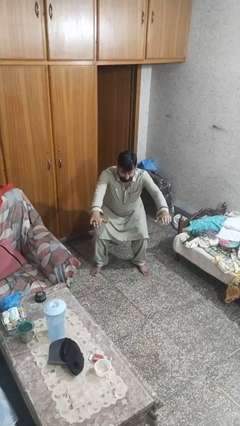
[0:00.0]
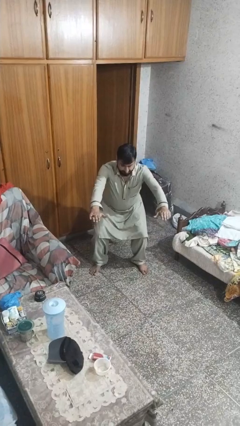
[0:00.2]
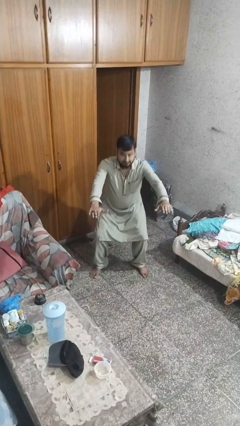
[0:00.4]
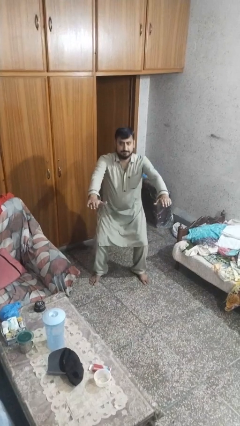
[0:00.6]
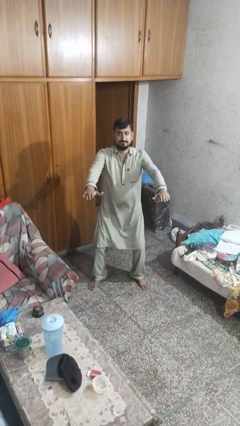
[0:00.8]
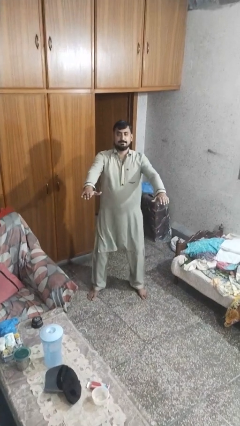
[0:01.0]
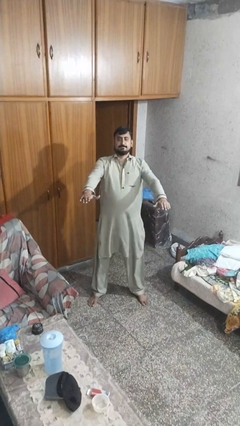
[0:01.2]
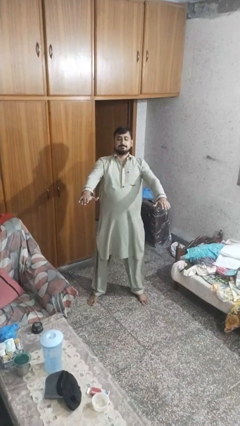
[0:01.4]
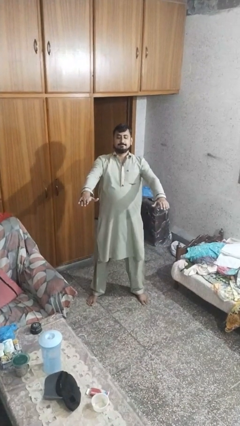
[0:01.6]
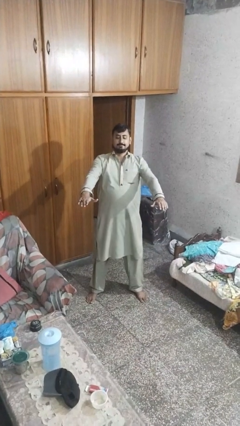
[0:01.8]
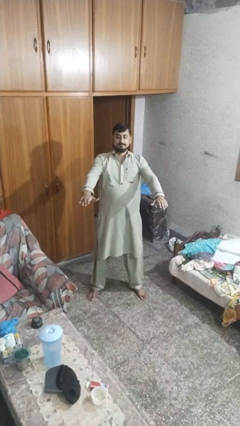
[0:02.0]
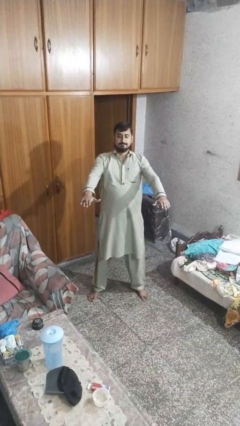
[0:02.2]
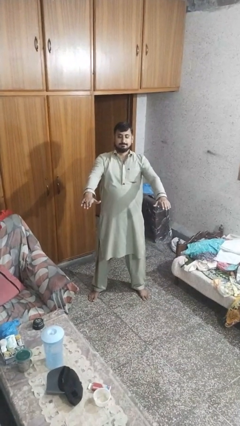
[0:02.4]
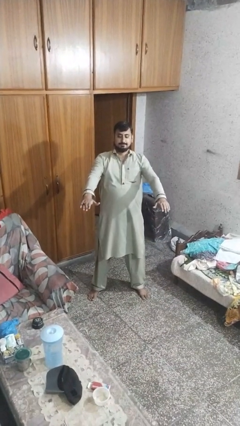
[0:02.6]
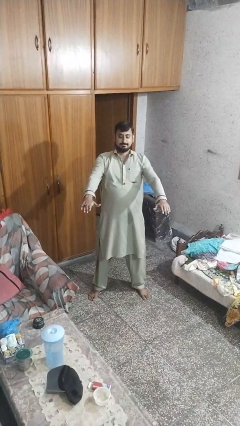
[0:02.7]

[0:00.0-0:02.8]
person stands up

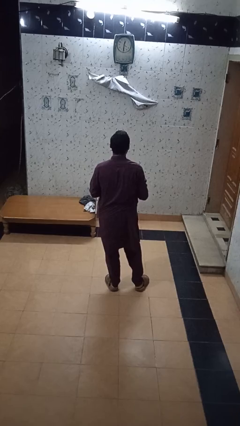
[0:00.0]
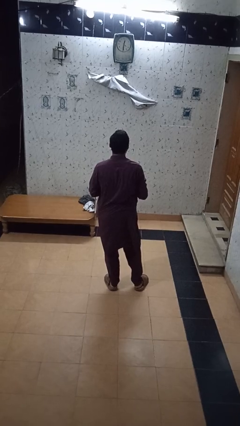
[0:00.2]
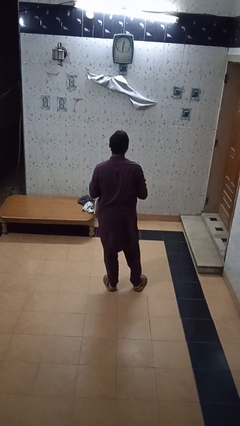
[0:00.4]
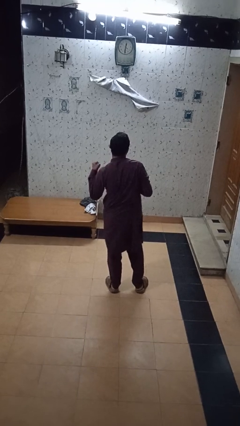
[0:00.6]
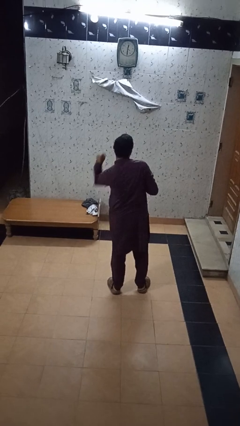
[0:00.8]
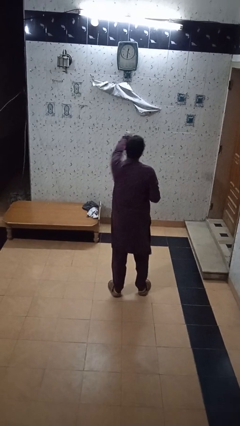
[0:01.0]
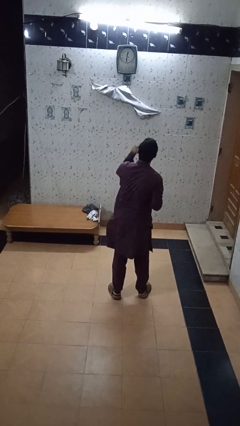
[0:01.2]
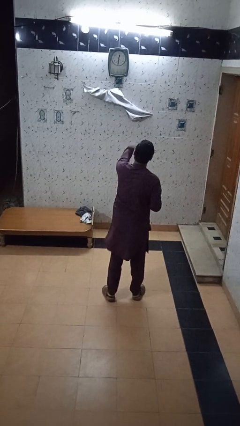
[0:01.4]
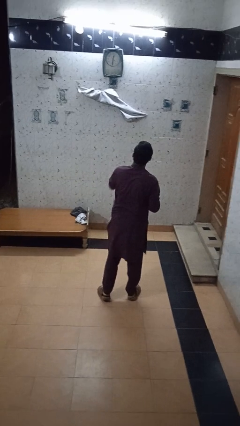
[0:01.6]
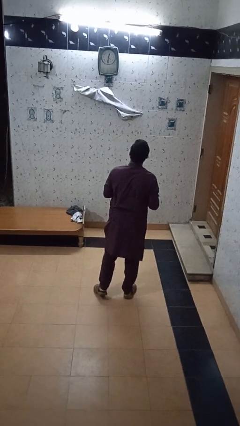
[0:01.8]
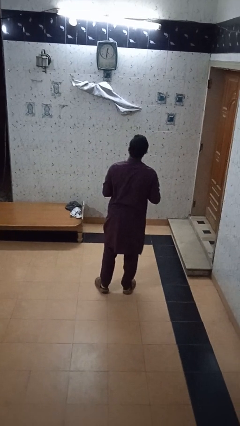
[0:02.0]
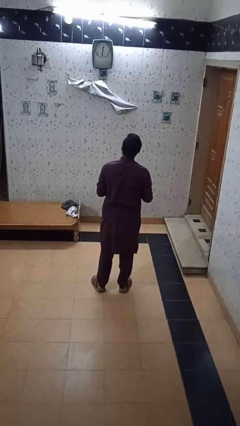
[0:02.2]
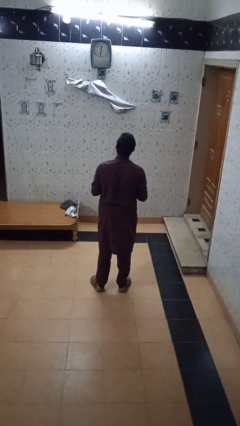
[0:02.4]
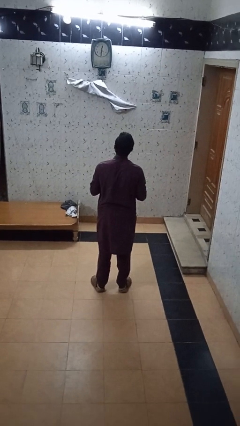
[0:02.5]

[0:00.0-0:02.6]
person punches

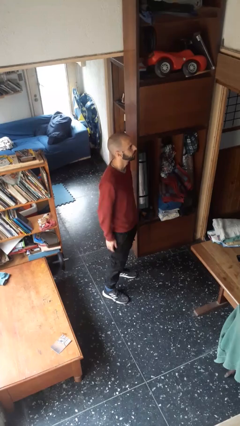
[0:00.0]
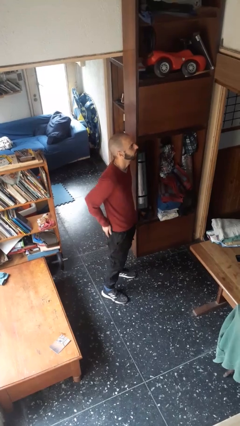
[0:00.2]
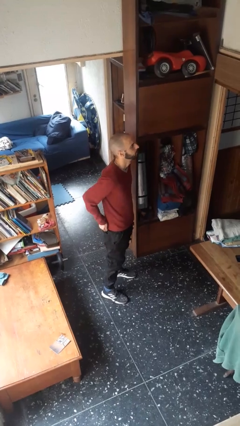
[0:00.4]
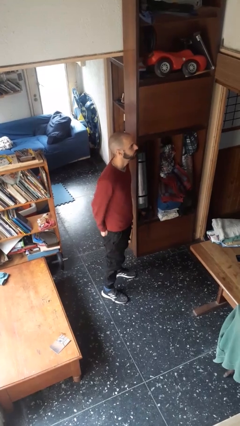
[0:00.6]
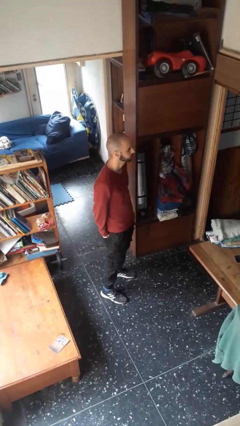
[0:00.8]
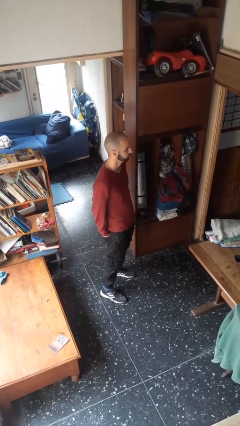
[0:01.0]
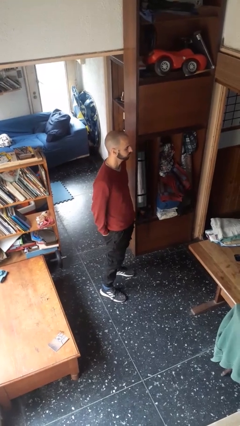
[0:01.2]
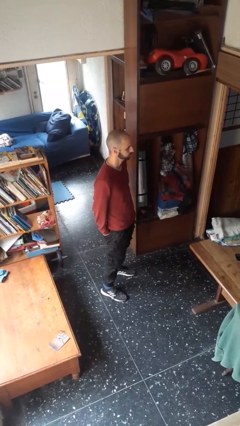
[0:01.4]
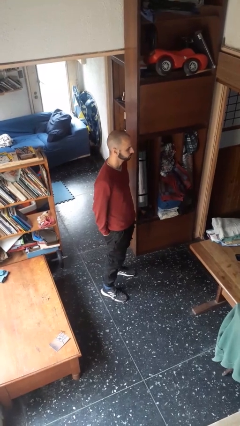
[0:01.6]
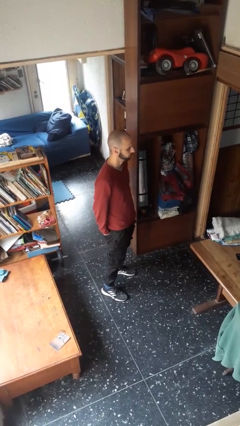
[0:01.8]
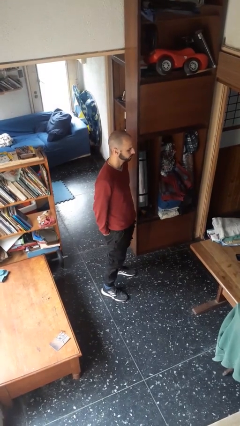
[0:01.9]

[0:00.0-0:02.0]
person puts hands in back pockets

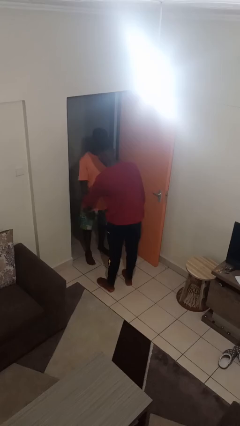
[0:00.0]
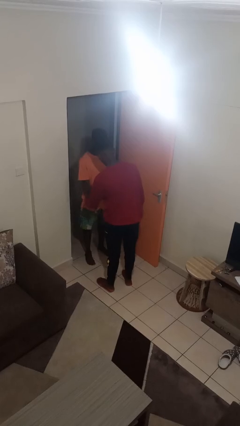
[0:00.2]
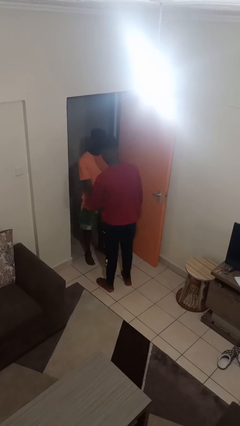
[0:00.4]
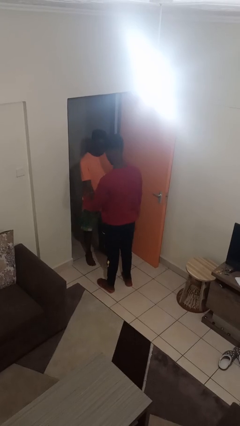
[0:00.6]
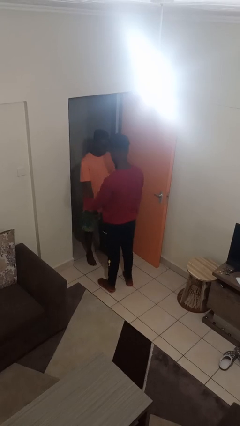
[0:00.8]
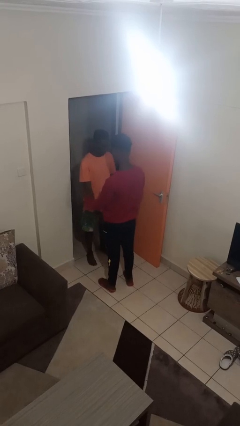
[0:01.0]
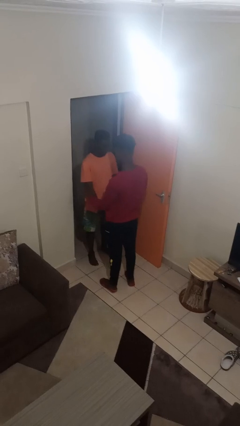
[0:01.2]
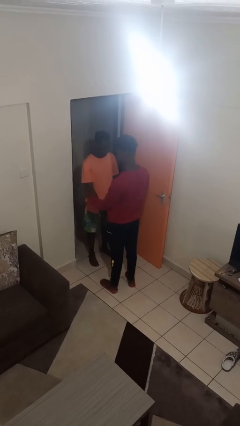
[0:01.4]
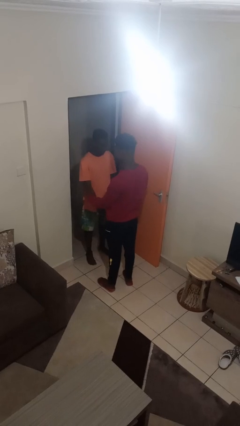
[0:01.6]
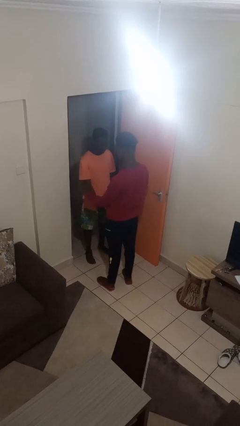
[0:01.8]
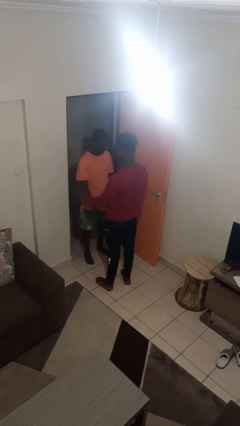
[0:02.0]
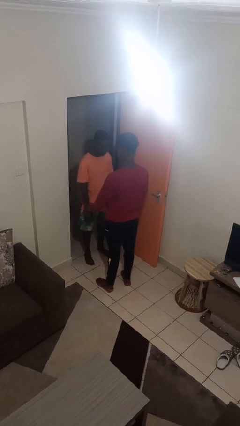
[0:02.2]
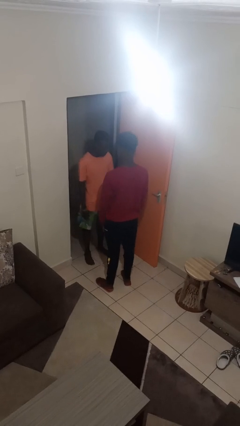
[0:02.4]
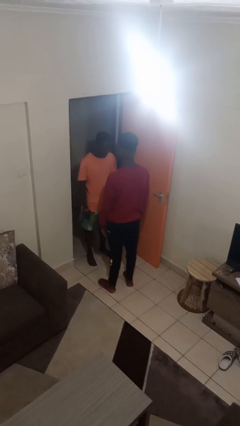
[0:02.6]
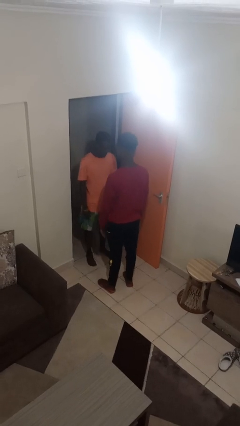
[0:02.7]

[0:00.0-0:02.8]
person grabs person by forearm

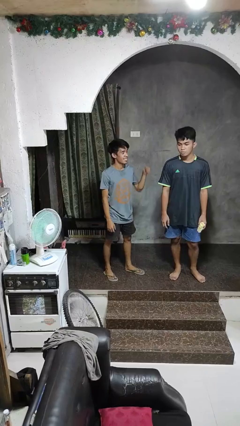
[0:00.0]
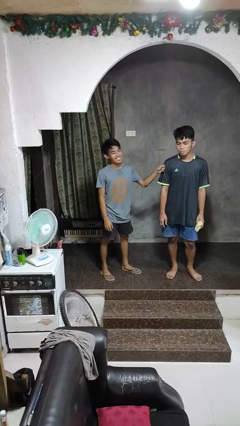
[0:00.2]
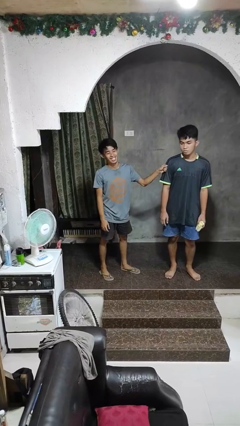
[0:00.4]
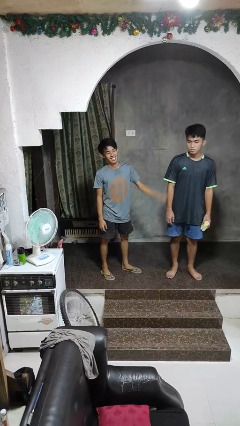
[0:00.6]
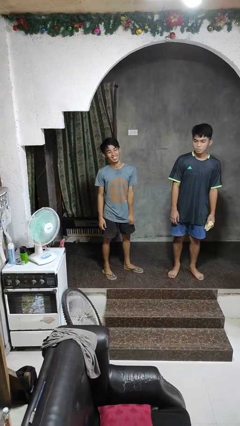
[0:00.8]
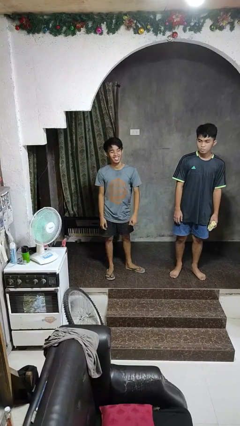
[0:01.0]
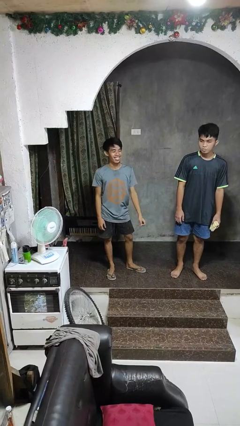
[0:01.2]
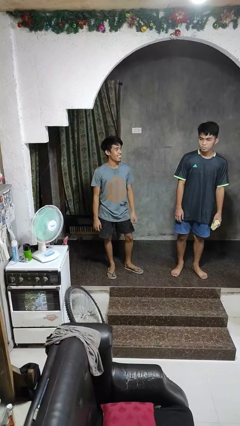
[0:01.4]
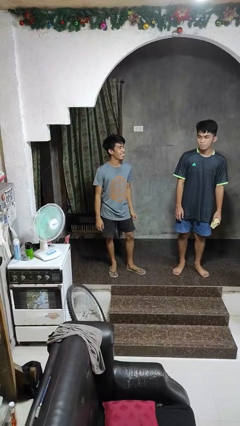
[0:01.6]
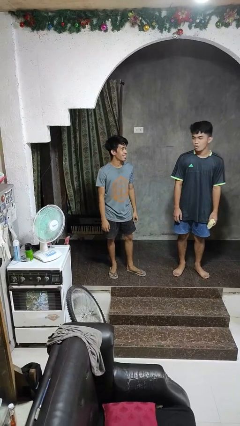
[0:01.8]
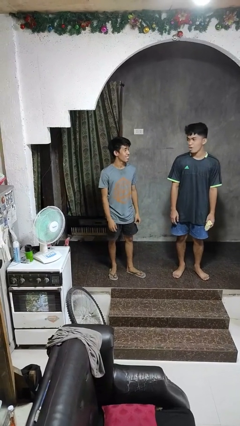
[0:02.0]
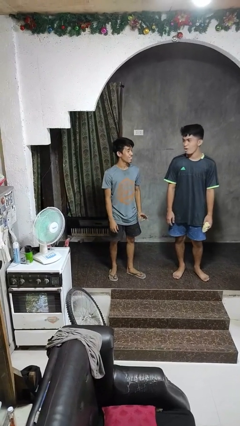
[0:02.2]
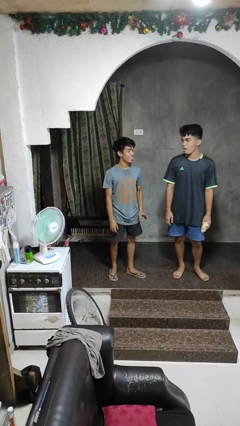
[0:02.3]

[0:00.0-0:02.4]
person pounds shoulders of person

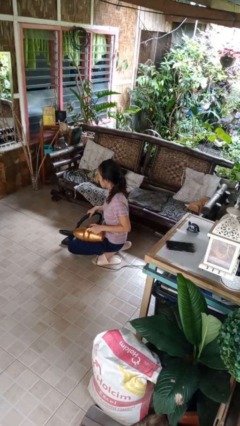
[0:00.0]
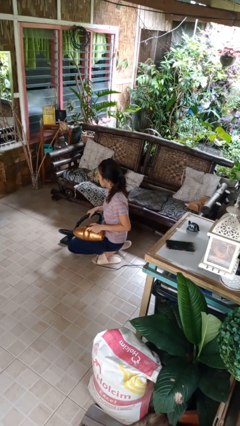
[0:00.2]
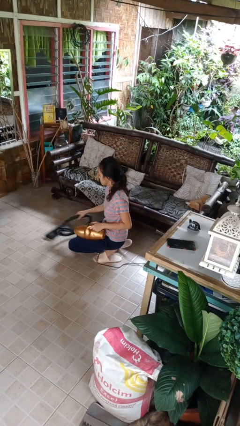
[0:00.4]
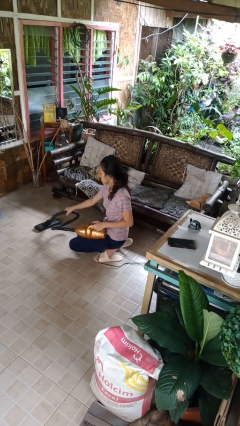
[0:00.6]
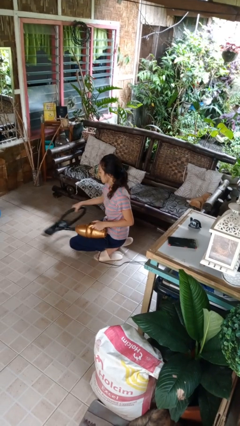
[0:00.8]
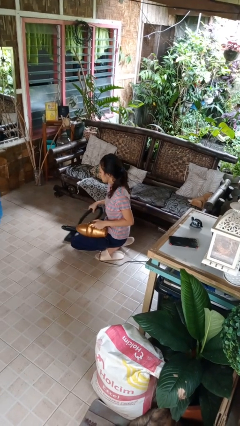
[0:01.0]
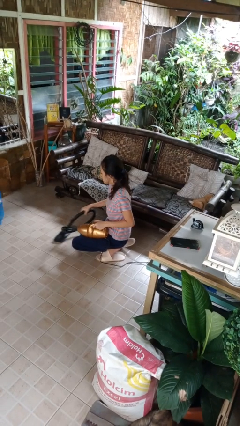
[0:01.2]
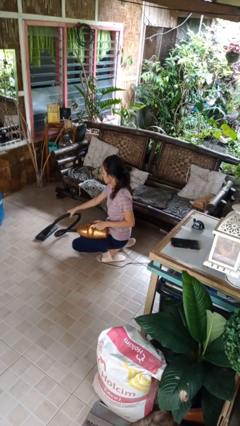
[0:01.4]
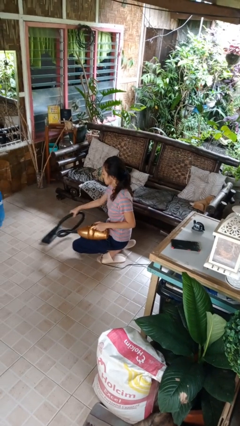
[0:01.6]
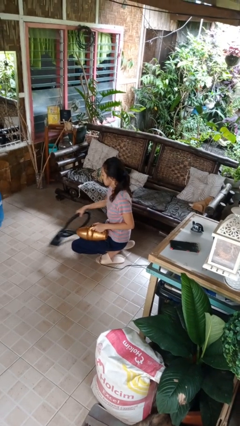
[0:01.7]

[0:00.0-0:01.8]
person vacuums carpet

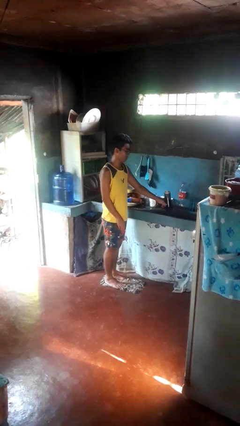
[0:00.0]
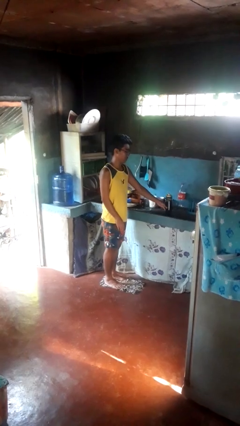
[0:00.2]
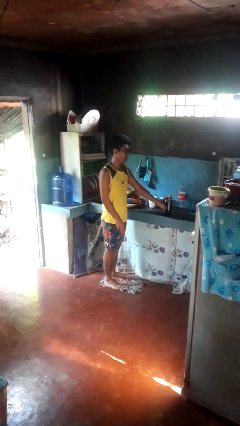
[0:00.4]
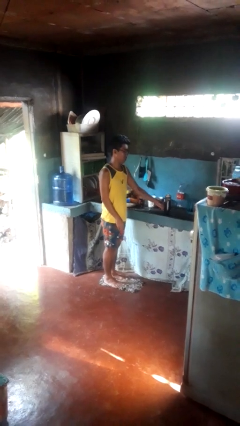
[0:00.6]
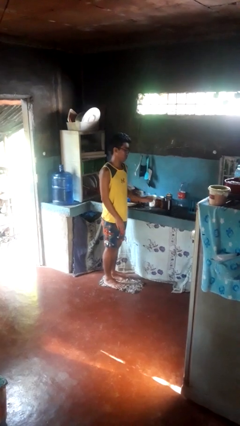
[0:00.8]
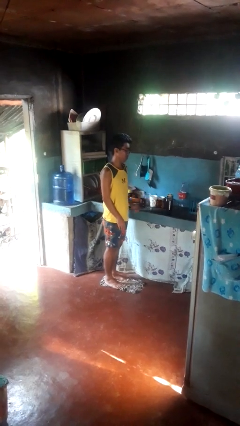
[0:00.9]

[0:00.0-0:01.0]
person puts down object on countertop

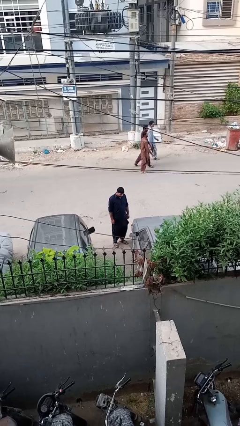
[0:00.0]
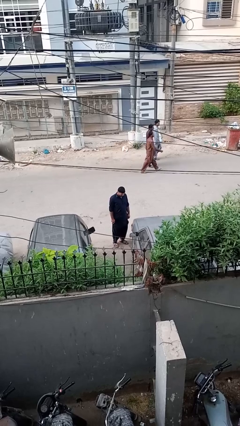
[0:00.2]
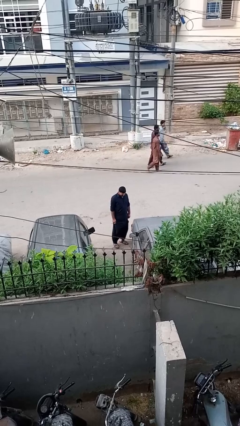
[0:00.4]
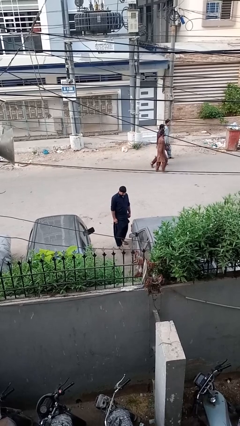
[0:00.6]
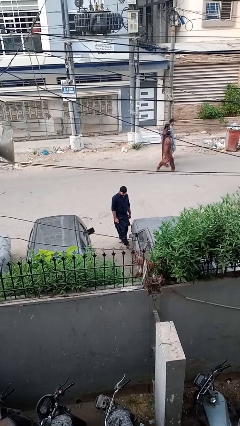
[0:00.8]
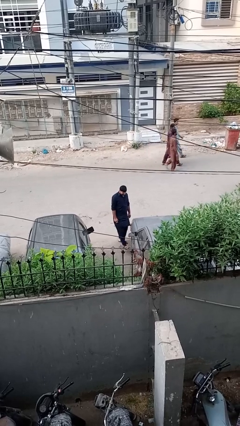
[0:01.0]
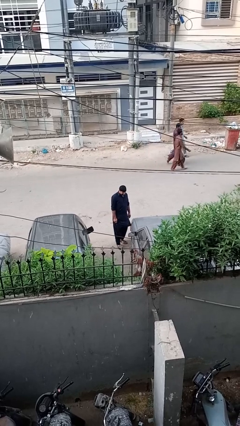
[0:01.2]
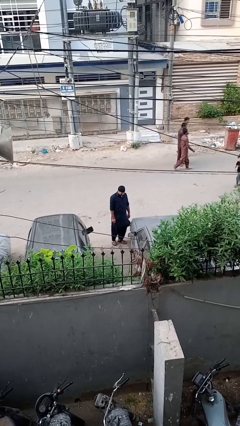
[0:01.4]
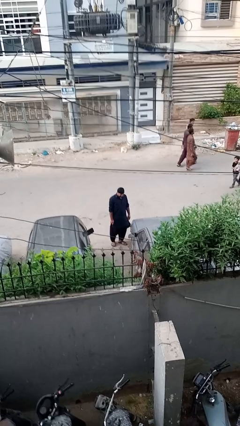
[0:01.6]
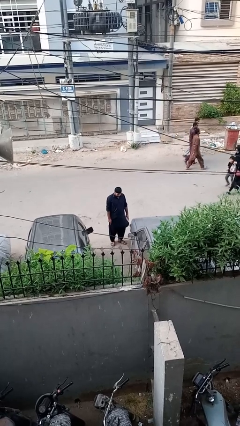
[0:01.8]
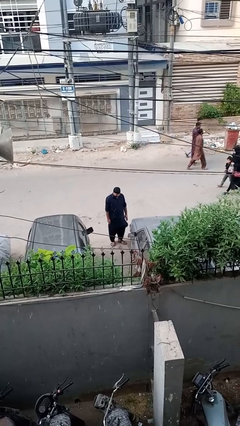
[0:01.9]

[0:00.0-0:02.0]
person kicks car tires
